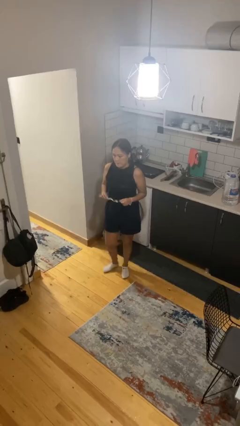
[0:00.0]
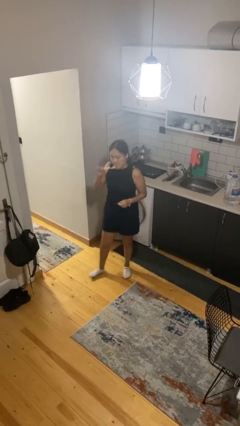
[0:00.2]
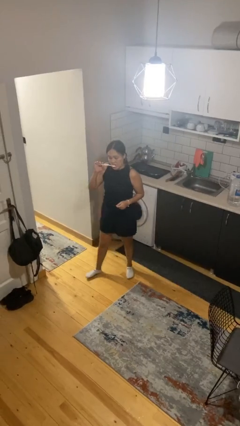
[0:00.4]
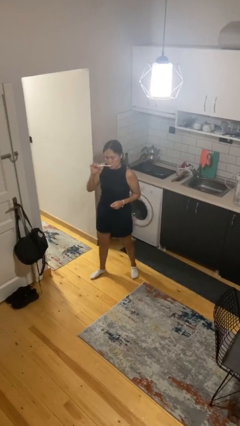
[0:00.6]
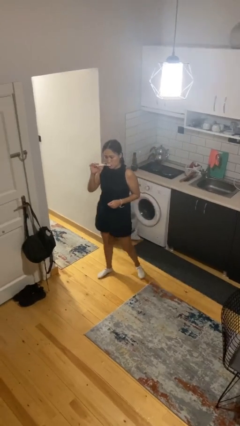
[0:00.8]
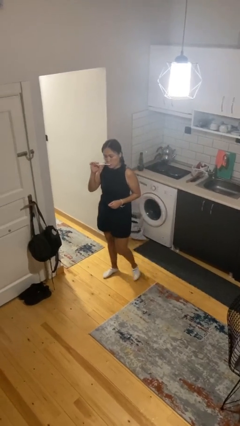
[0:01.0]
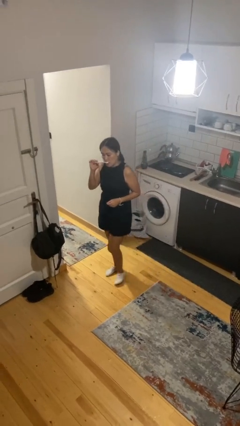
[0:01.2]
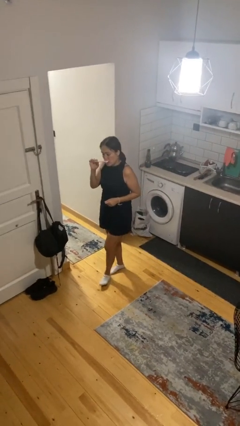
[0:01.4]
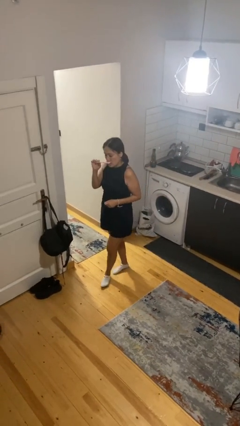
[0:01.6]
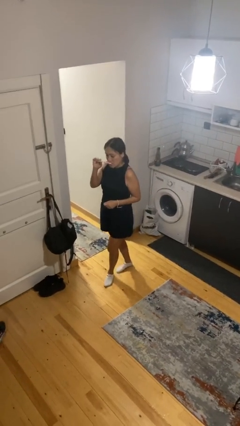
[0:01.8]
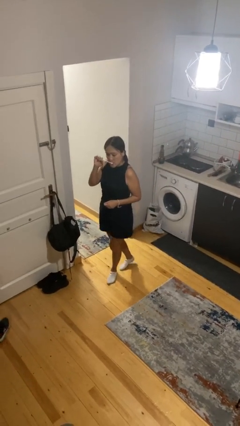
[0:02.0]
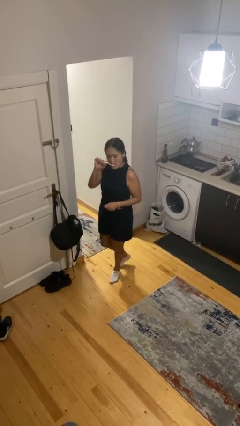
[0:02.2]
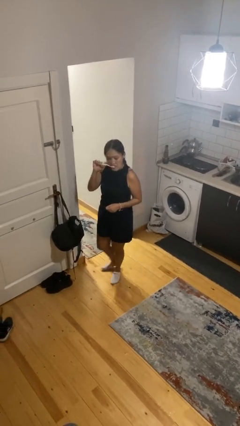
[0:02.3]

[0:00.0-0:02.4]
person brushes teeth

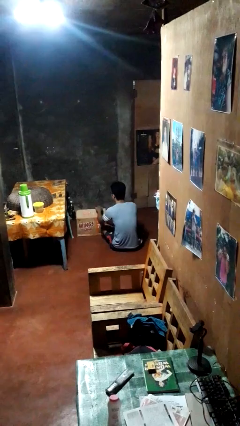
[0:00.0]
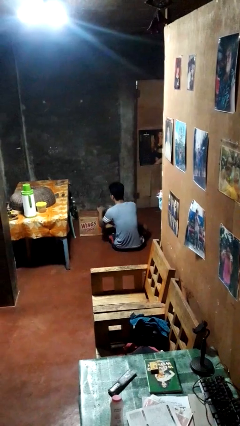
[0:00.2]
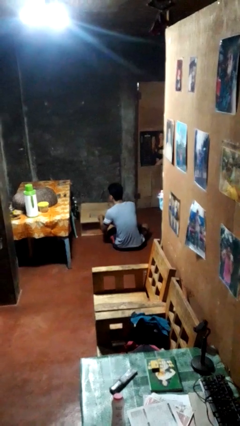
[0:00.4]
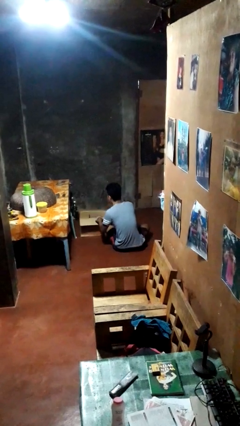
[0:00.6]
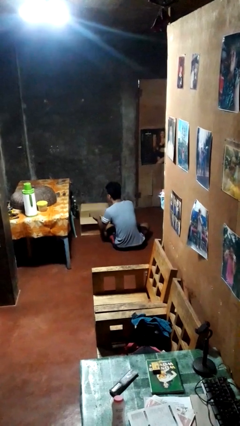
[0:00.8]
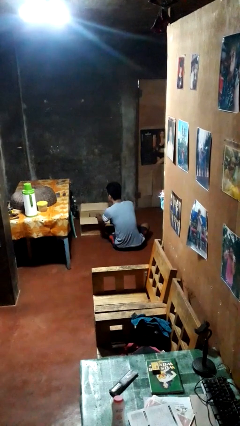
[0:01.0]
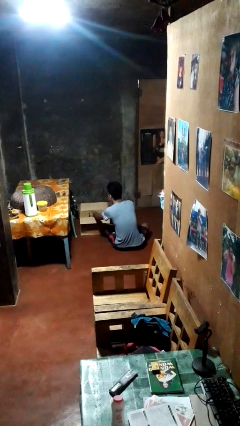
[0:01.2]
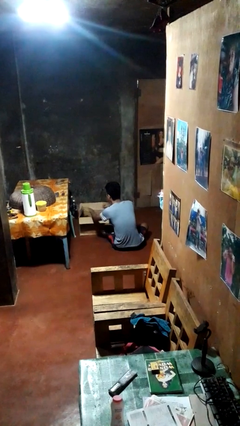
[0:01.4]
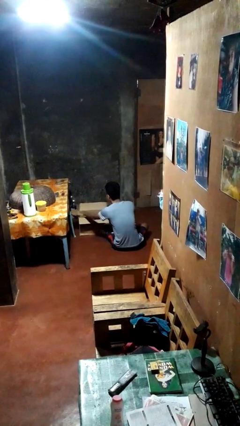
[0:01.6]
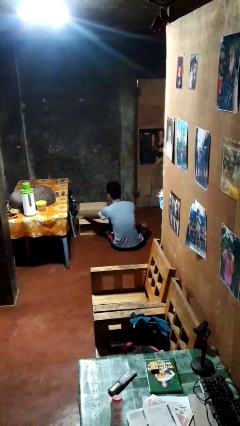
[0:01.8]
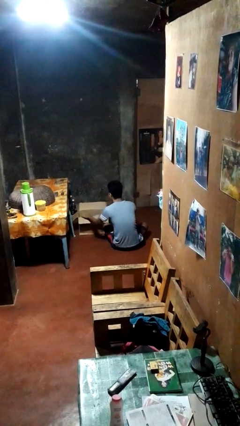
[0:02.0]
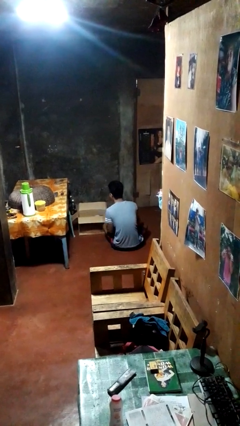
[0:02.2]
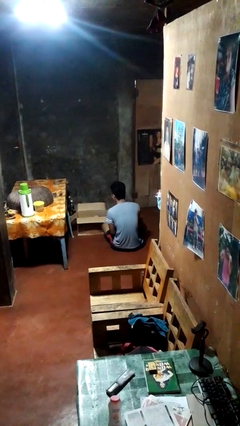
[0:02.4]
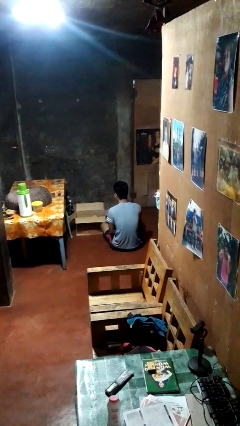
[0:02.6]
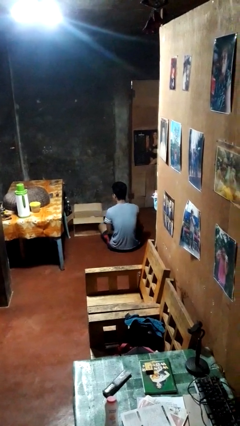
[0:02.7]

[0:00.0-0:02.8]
person opens box

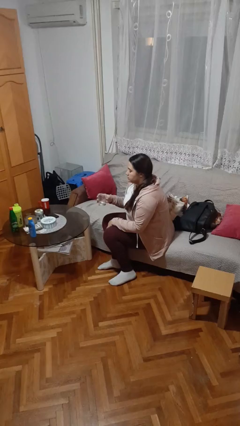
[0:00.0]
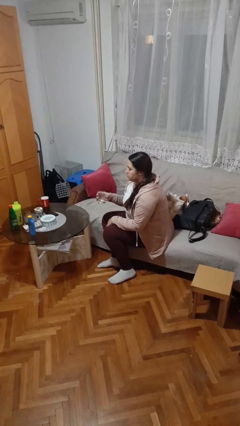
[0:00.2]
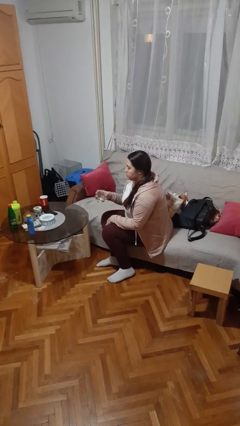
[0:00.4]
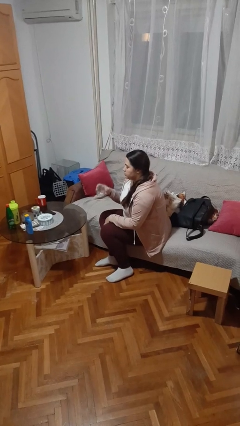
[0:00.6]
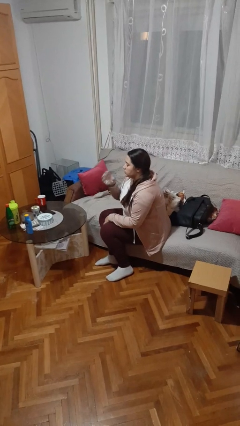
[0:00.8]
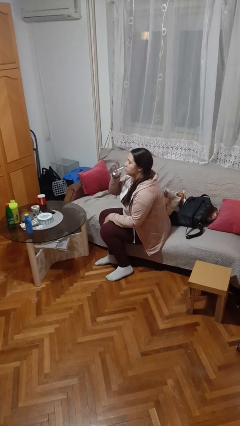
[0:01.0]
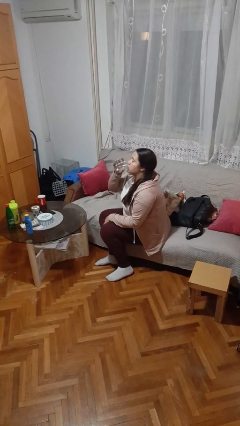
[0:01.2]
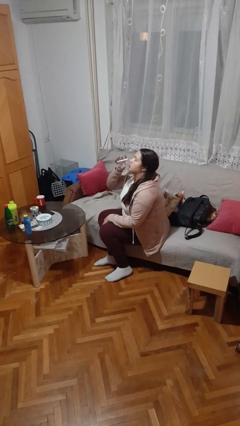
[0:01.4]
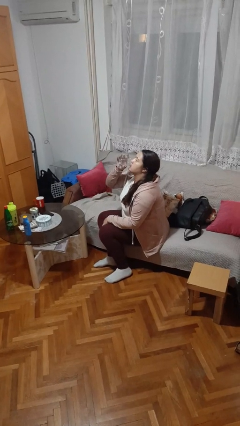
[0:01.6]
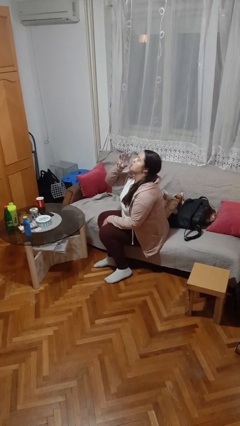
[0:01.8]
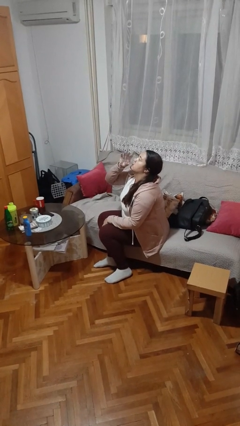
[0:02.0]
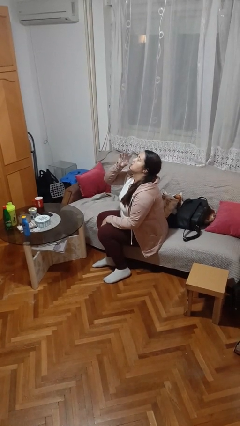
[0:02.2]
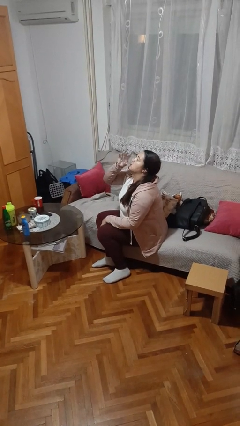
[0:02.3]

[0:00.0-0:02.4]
person drinks from shotglass

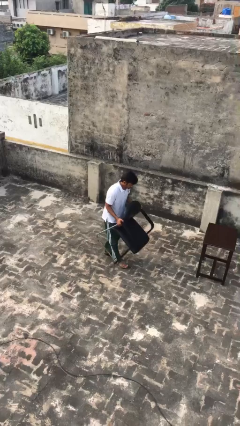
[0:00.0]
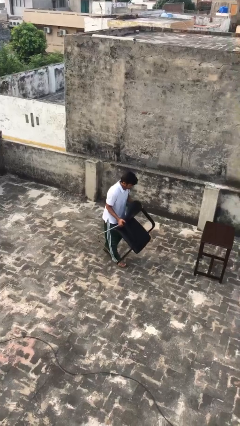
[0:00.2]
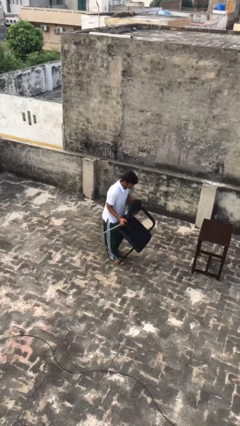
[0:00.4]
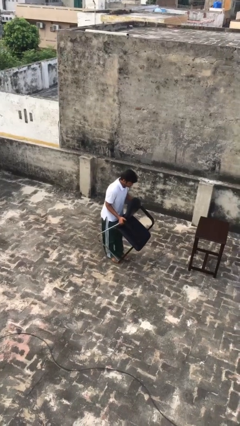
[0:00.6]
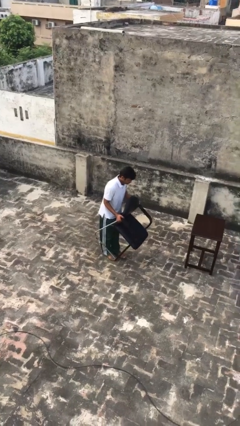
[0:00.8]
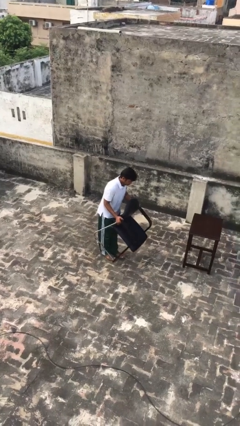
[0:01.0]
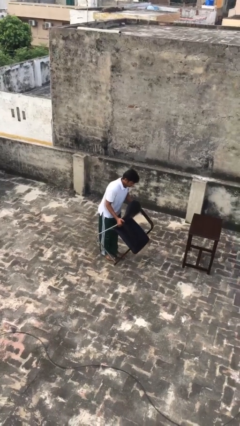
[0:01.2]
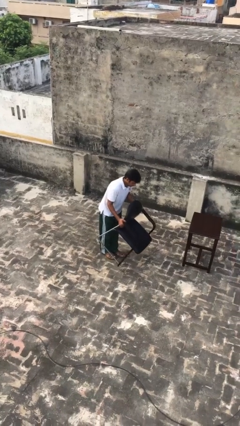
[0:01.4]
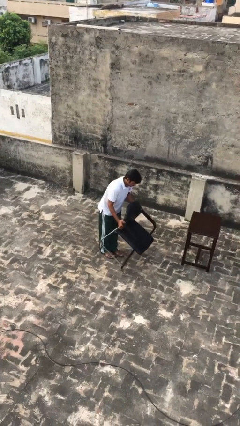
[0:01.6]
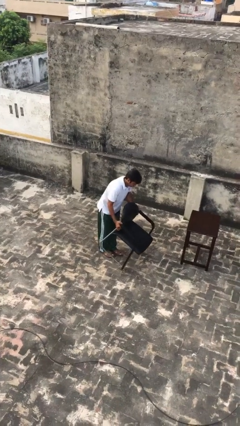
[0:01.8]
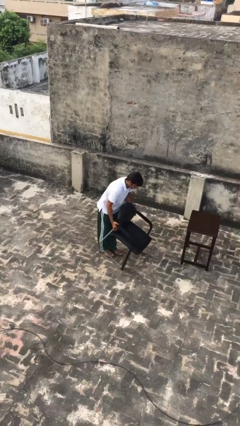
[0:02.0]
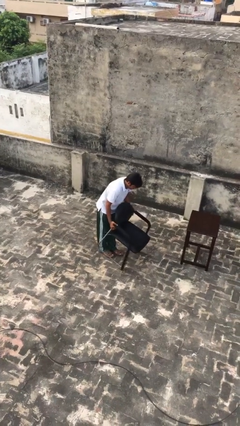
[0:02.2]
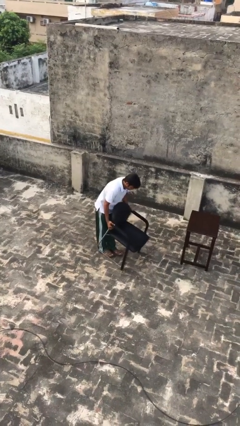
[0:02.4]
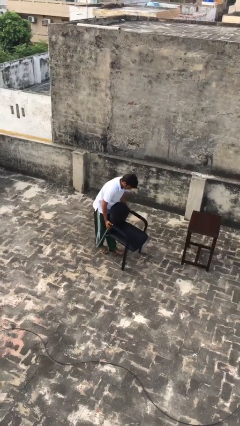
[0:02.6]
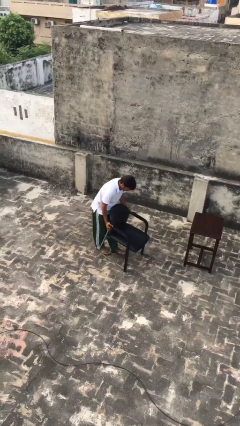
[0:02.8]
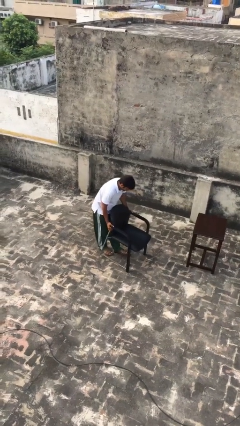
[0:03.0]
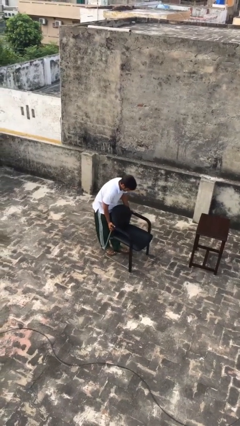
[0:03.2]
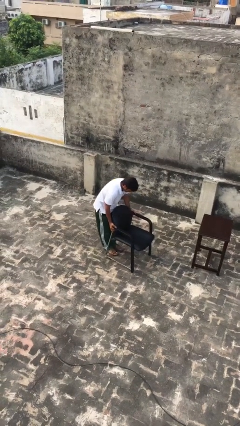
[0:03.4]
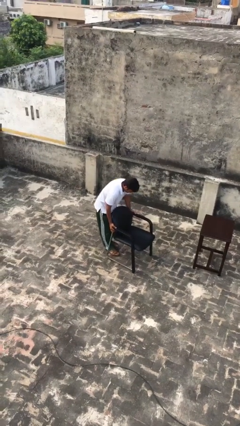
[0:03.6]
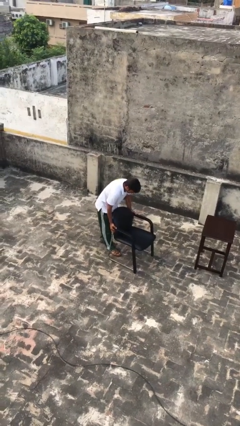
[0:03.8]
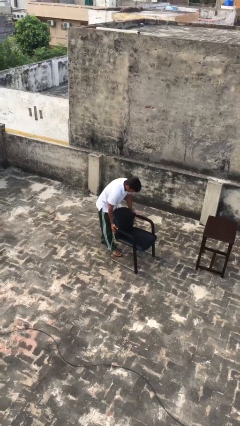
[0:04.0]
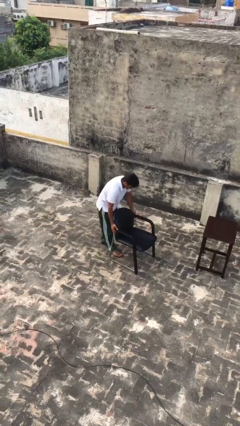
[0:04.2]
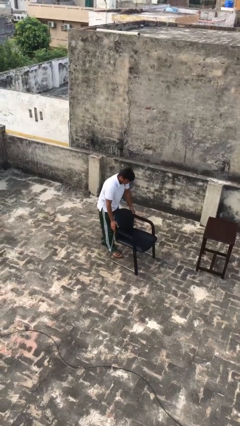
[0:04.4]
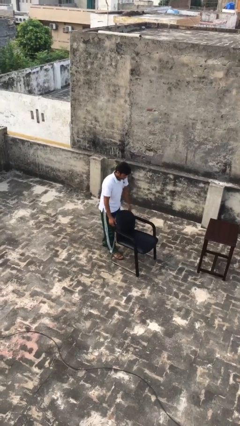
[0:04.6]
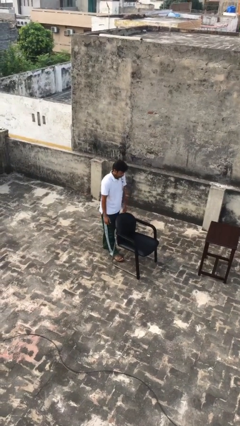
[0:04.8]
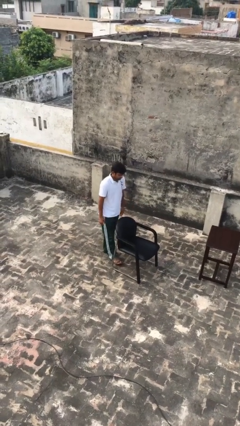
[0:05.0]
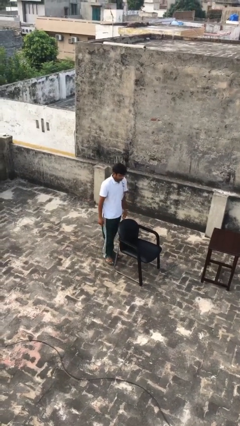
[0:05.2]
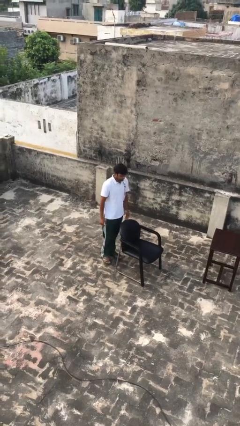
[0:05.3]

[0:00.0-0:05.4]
person puts down object on floor

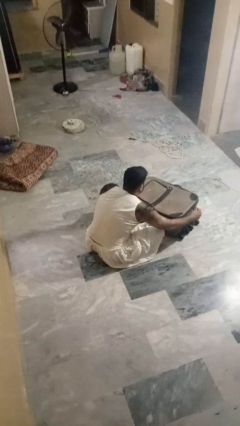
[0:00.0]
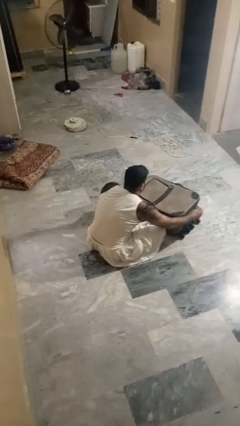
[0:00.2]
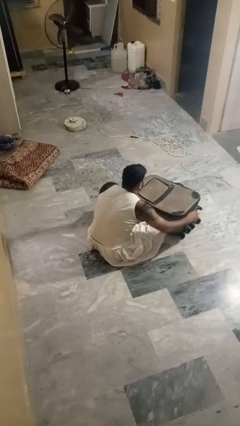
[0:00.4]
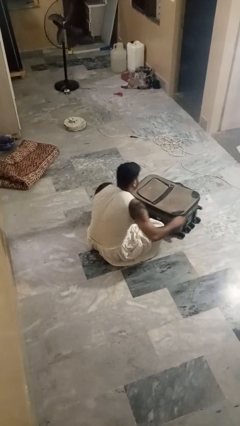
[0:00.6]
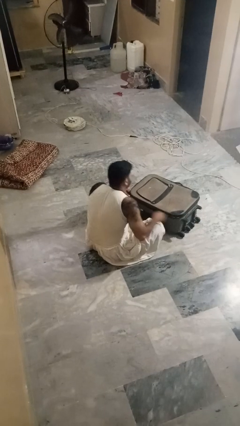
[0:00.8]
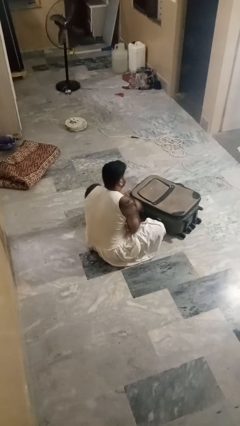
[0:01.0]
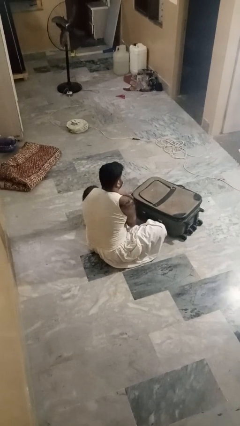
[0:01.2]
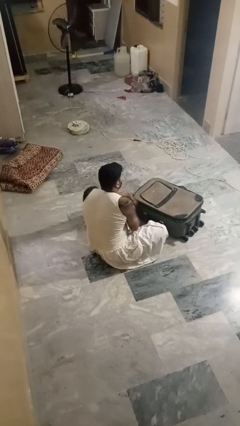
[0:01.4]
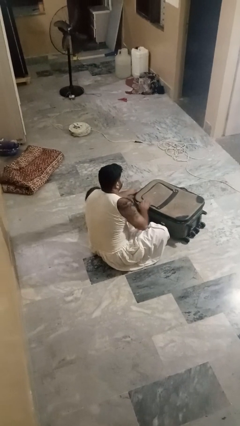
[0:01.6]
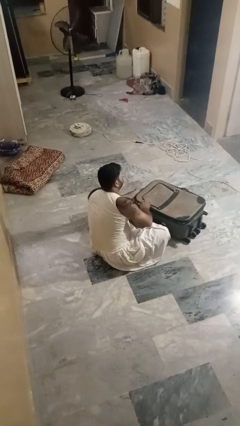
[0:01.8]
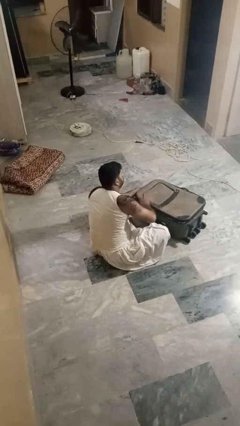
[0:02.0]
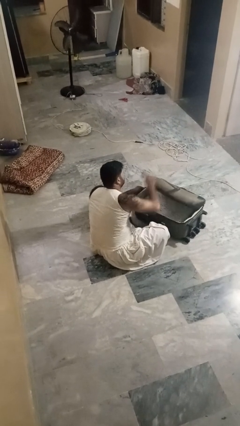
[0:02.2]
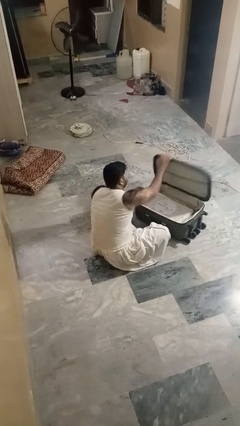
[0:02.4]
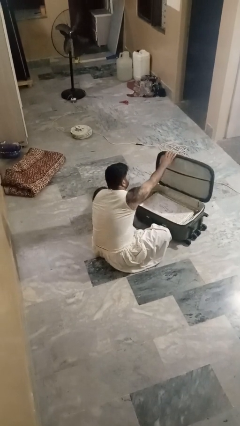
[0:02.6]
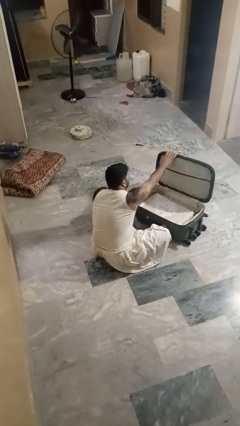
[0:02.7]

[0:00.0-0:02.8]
person opens suitcase

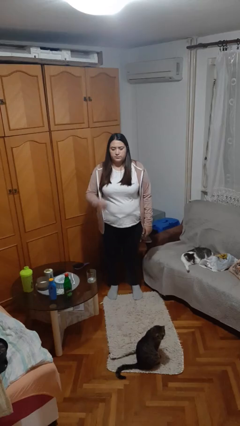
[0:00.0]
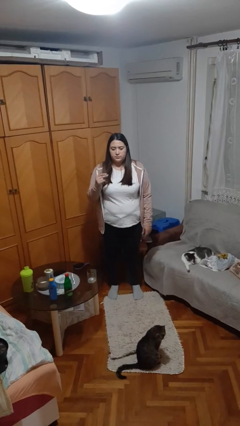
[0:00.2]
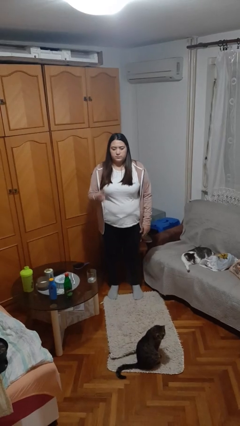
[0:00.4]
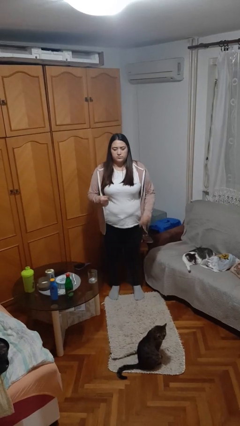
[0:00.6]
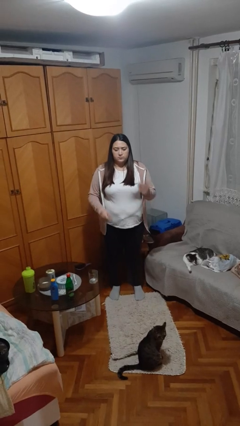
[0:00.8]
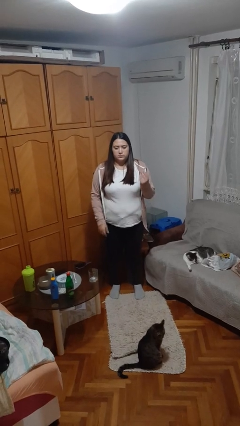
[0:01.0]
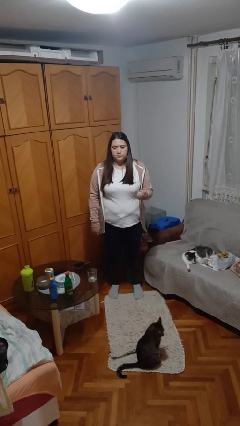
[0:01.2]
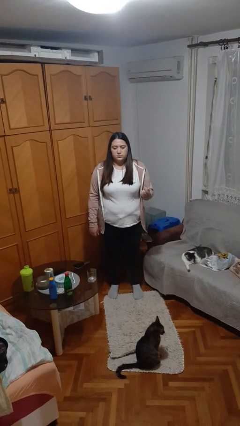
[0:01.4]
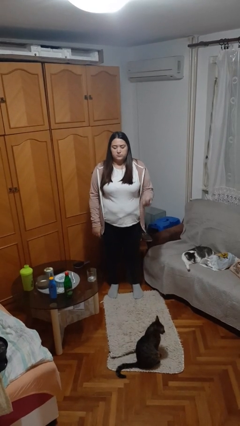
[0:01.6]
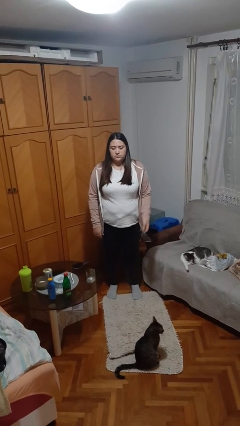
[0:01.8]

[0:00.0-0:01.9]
person snaps fingers
